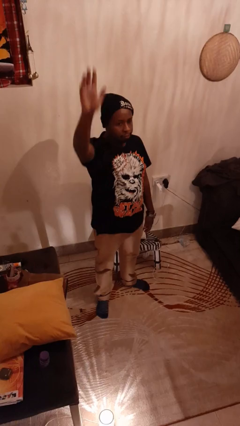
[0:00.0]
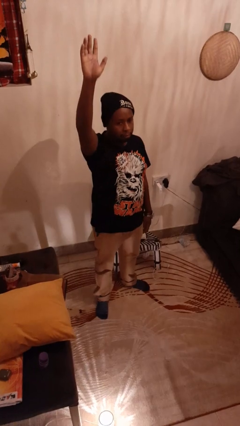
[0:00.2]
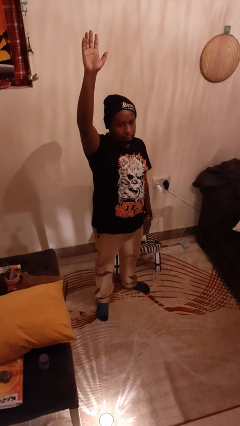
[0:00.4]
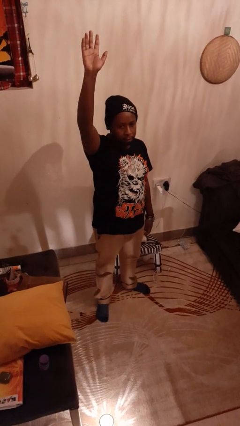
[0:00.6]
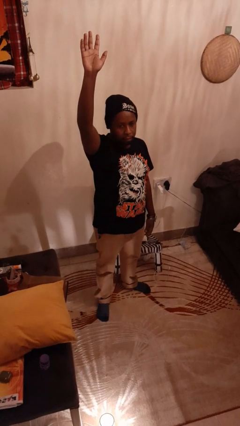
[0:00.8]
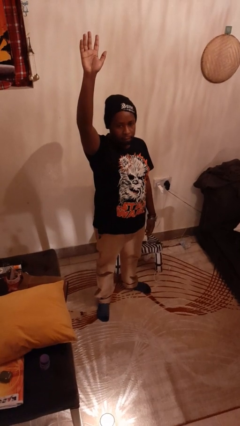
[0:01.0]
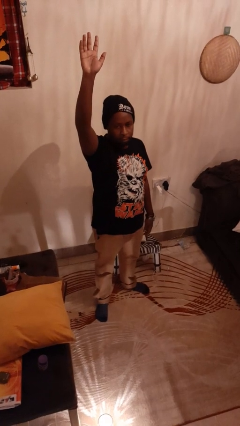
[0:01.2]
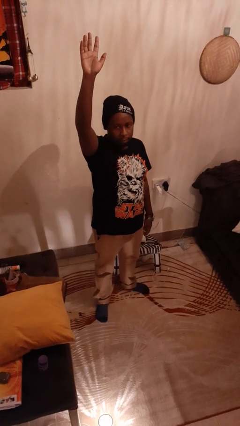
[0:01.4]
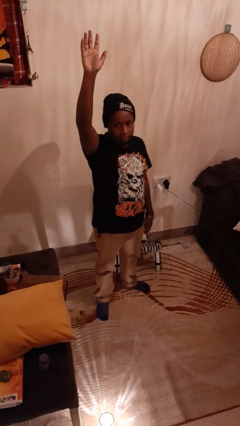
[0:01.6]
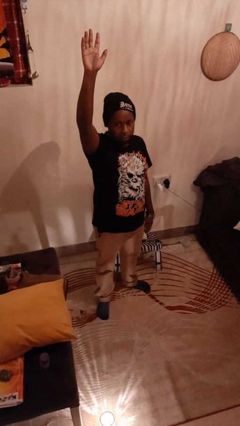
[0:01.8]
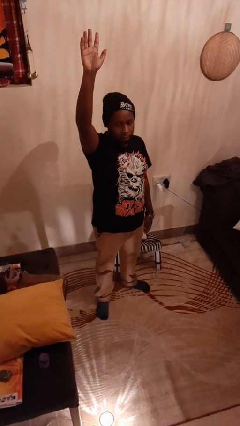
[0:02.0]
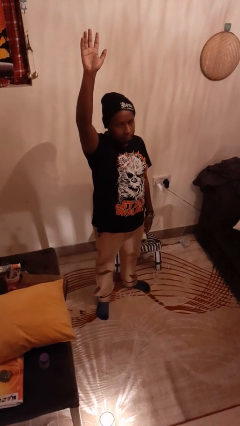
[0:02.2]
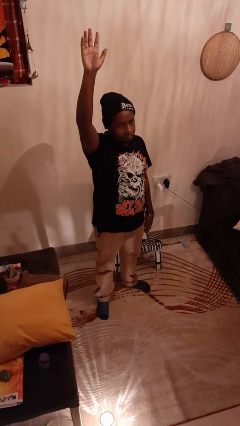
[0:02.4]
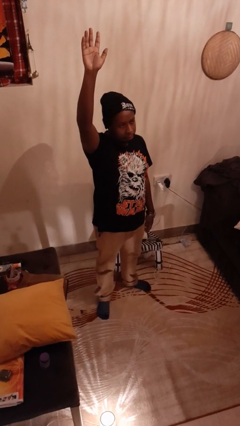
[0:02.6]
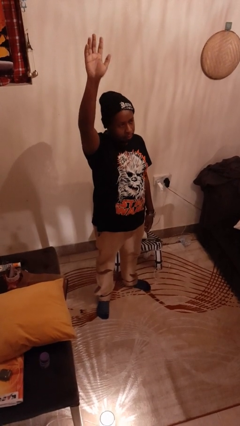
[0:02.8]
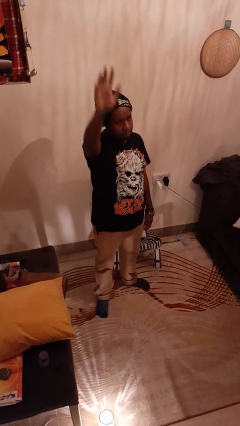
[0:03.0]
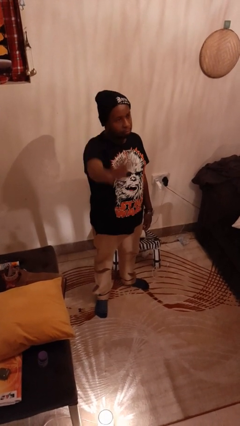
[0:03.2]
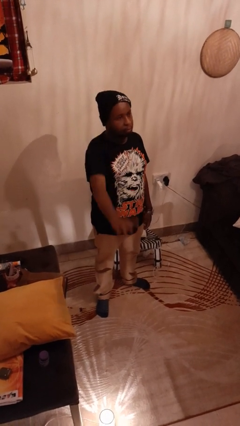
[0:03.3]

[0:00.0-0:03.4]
person gestures raise hand

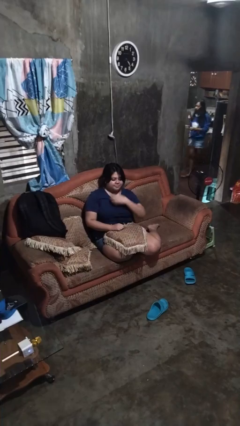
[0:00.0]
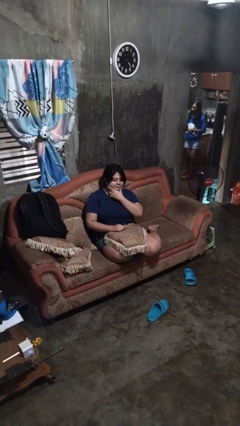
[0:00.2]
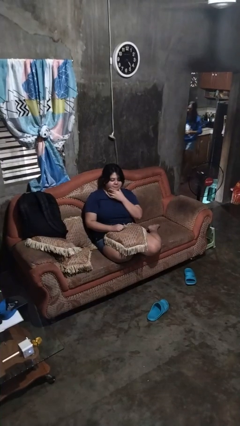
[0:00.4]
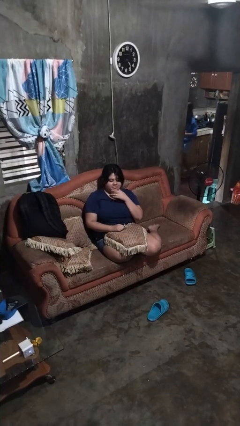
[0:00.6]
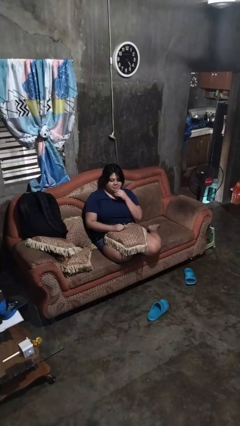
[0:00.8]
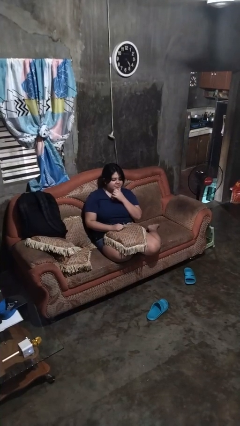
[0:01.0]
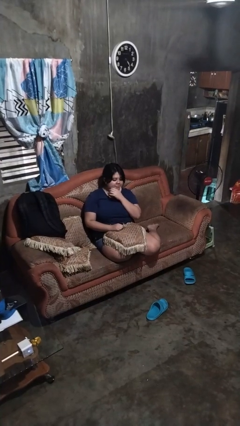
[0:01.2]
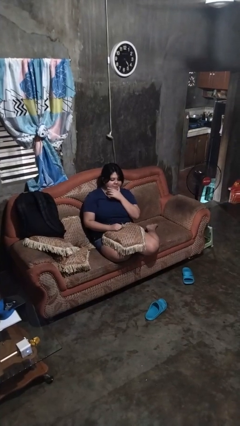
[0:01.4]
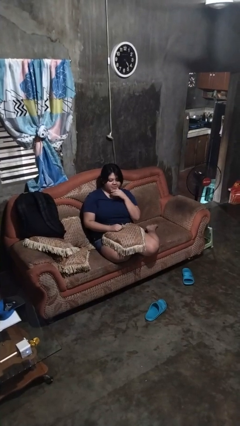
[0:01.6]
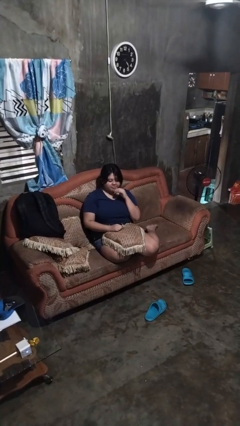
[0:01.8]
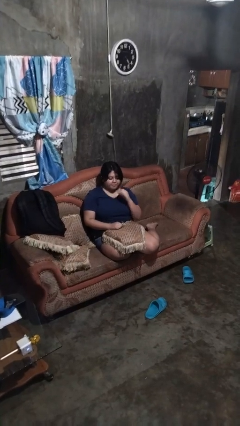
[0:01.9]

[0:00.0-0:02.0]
person strokes chin

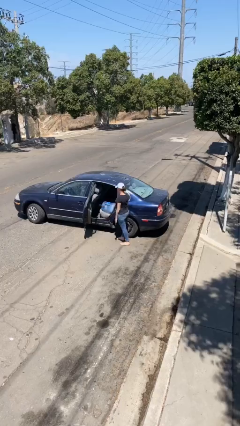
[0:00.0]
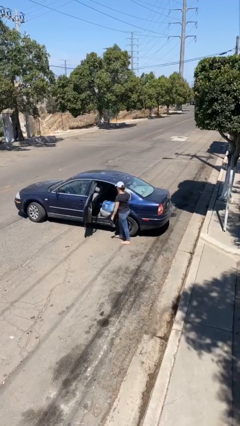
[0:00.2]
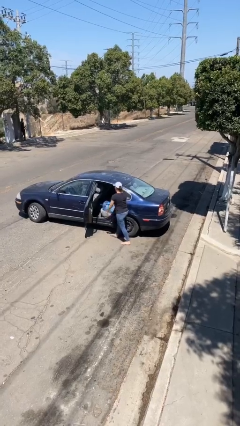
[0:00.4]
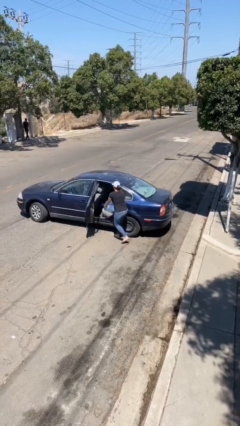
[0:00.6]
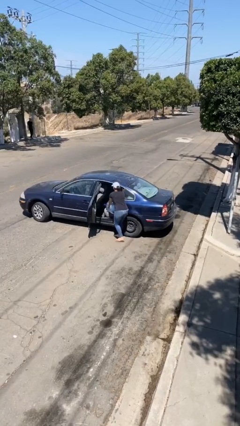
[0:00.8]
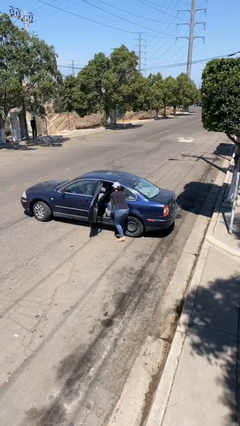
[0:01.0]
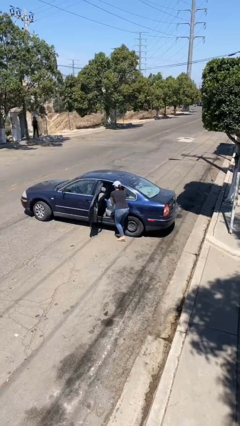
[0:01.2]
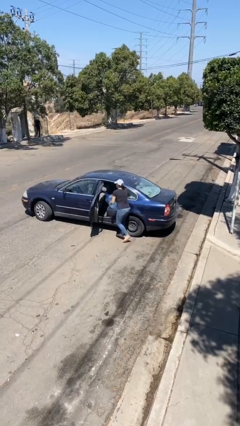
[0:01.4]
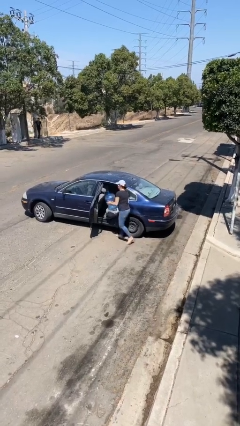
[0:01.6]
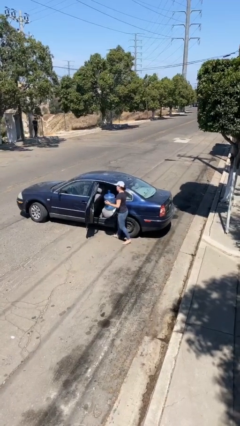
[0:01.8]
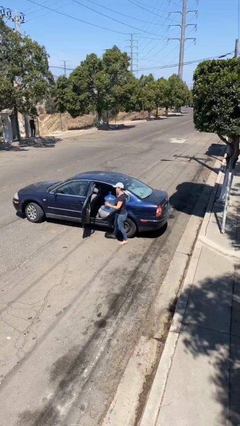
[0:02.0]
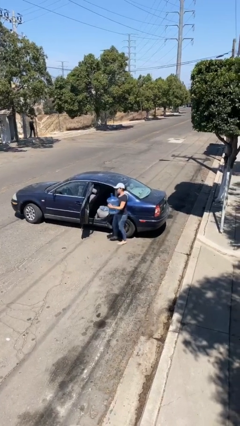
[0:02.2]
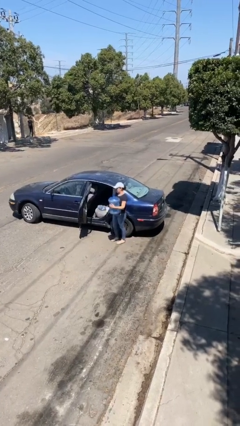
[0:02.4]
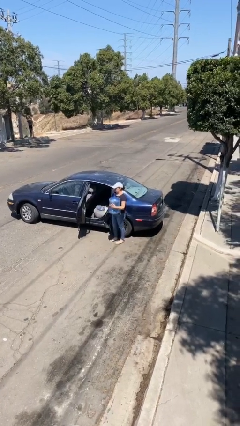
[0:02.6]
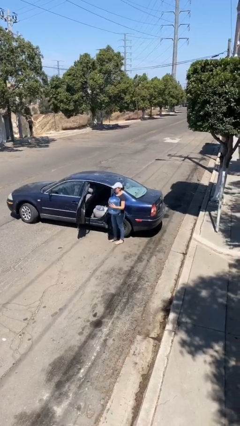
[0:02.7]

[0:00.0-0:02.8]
person unloads car

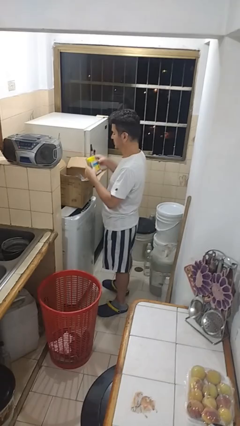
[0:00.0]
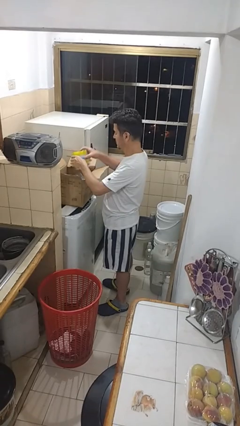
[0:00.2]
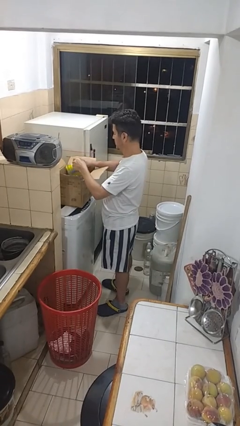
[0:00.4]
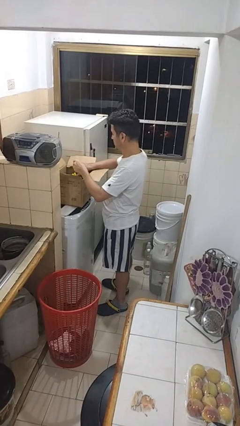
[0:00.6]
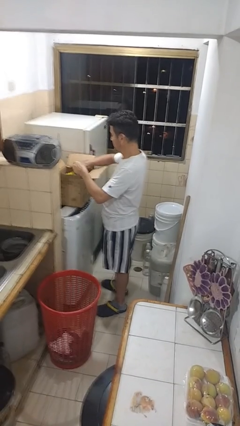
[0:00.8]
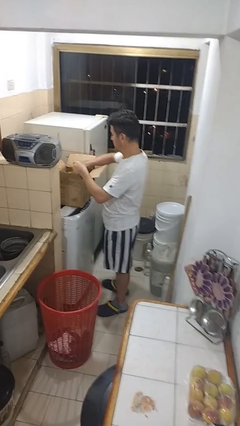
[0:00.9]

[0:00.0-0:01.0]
person puts object into box

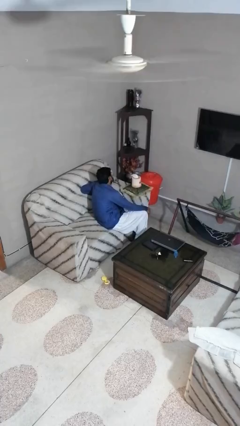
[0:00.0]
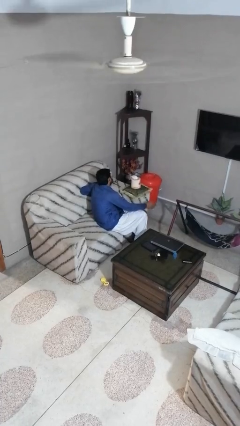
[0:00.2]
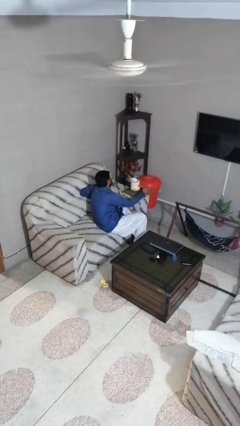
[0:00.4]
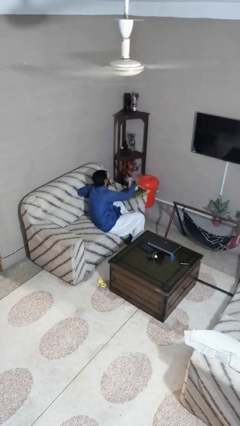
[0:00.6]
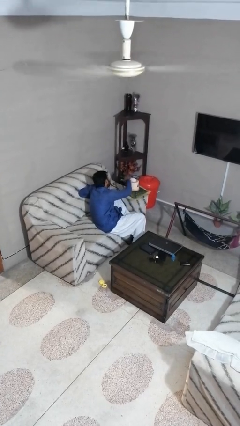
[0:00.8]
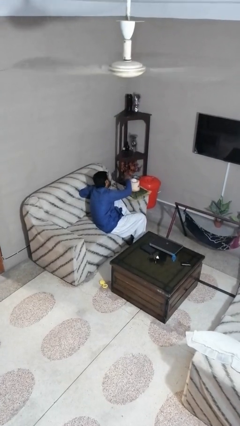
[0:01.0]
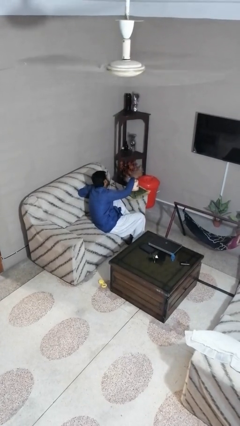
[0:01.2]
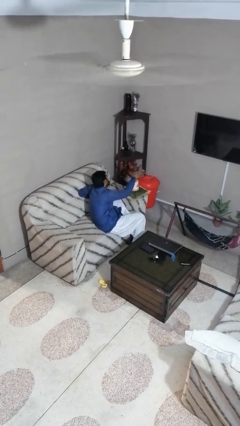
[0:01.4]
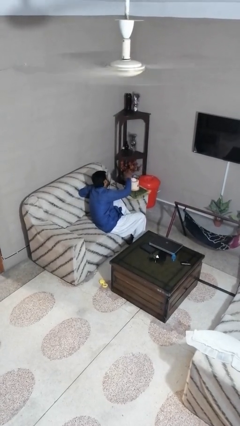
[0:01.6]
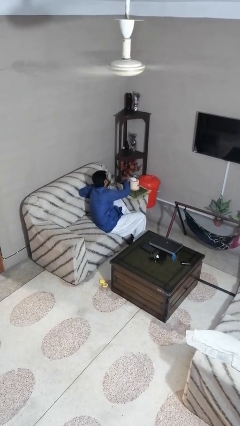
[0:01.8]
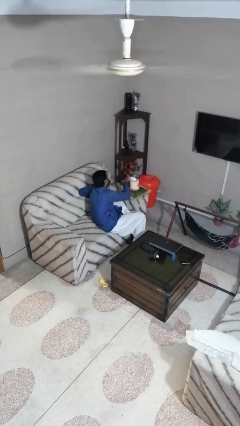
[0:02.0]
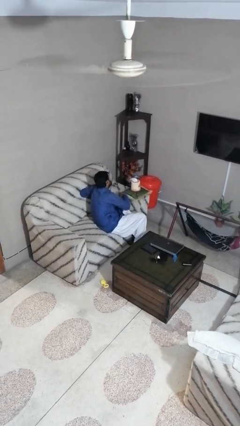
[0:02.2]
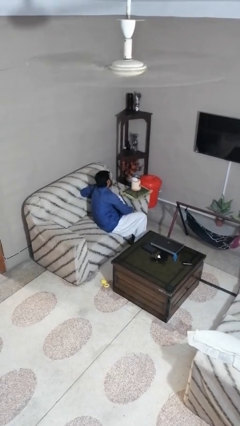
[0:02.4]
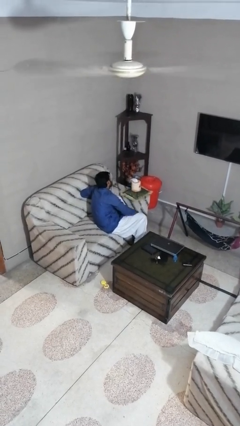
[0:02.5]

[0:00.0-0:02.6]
person waves hand over object

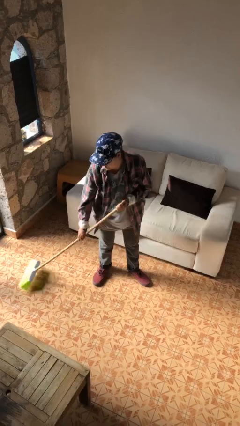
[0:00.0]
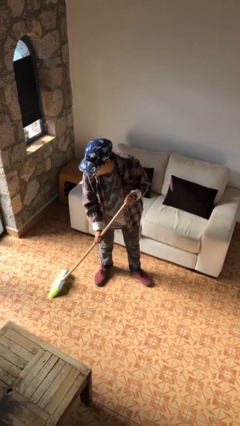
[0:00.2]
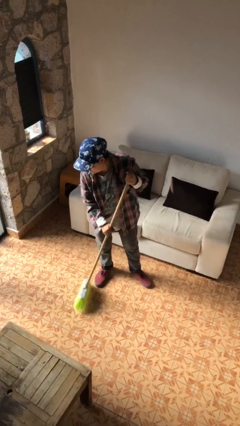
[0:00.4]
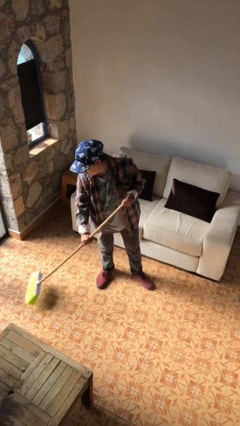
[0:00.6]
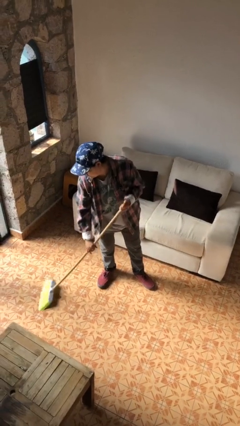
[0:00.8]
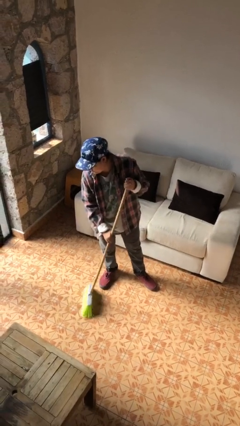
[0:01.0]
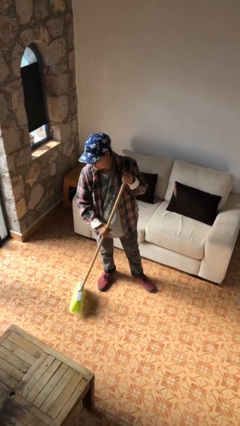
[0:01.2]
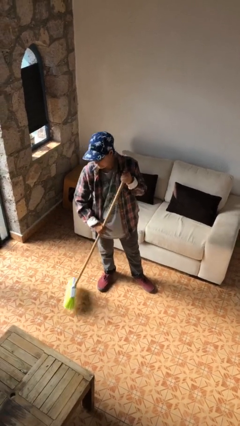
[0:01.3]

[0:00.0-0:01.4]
person sweeps floor

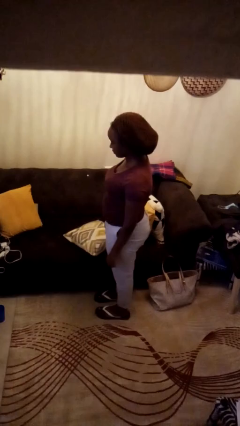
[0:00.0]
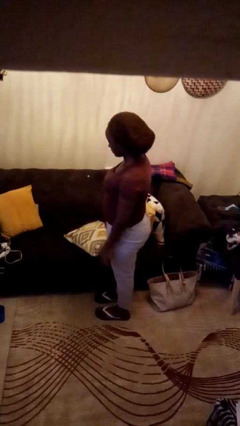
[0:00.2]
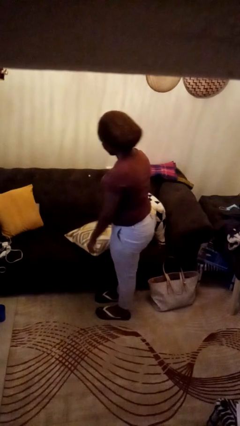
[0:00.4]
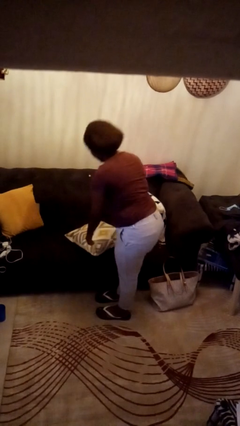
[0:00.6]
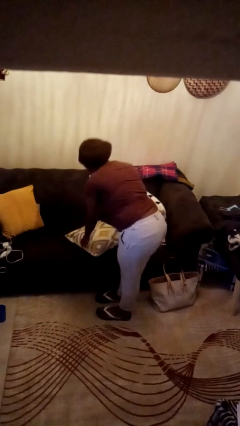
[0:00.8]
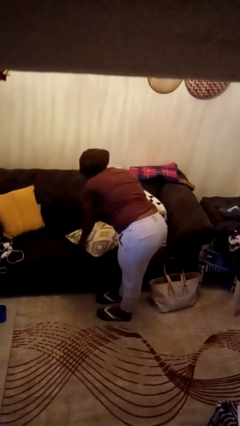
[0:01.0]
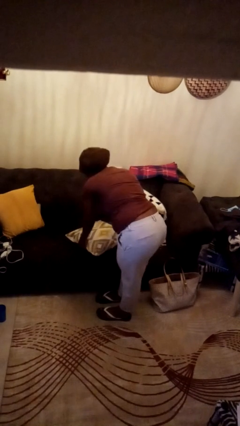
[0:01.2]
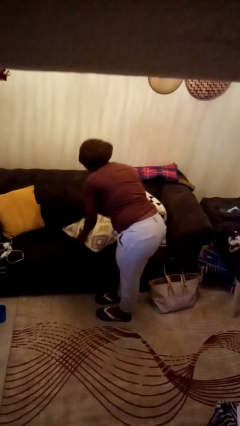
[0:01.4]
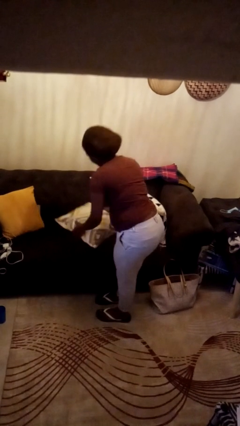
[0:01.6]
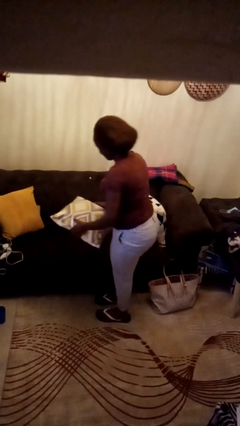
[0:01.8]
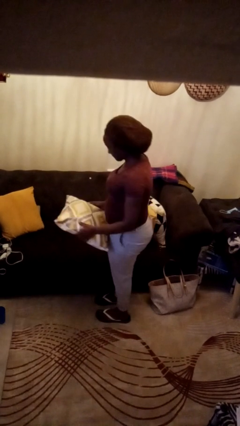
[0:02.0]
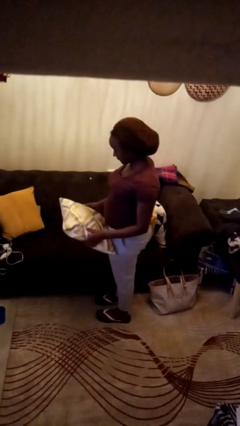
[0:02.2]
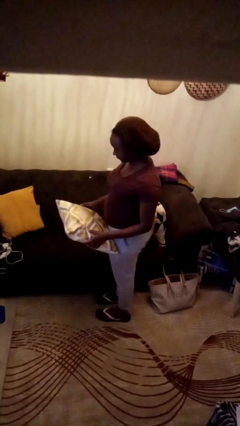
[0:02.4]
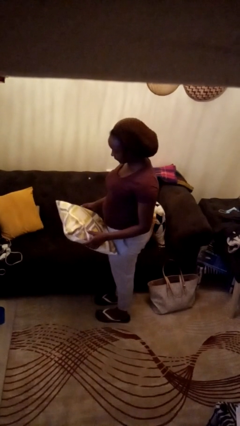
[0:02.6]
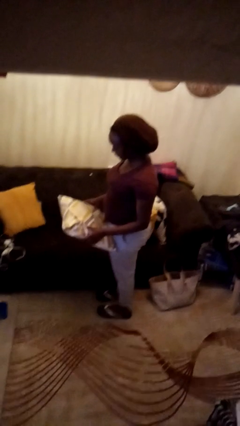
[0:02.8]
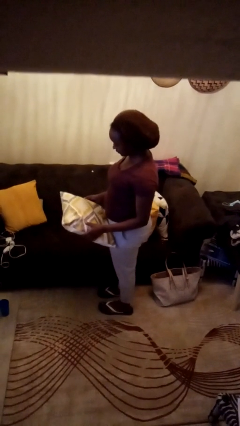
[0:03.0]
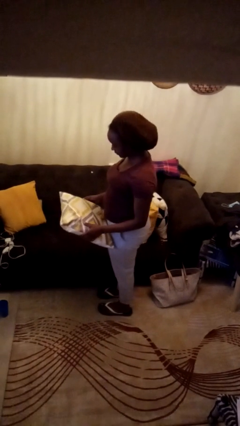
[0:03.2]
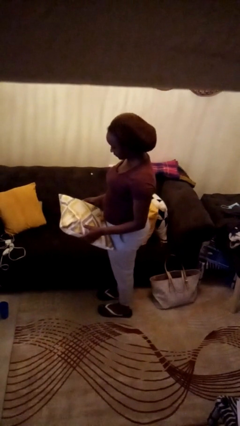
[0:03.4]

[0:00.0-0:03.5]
person picks up object from couch

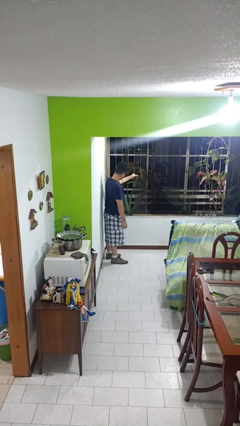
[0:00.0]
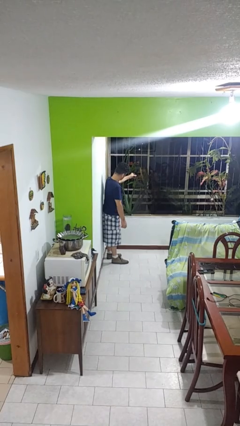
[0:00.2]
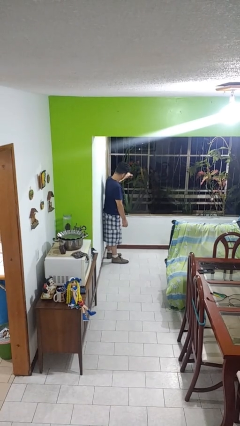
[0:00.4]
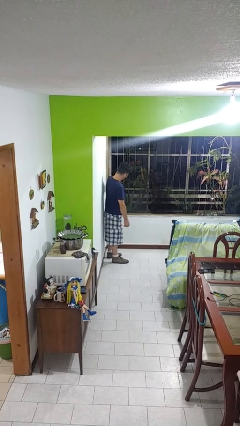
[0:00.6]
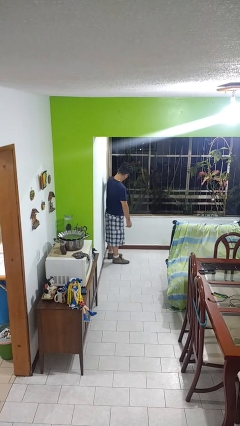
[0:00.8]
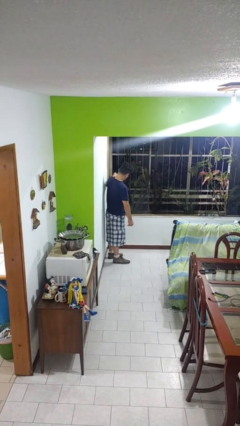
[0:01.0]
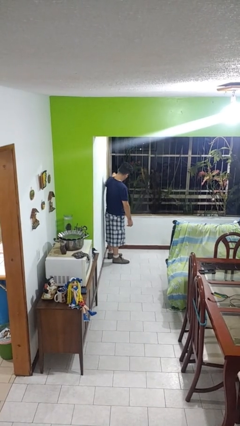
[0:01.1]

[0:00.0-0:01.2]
person closes home window
